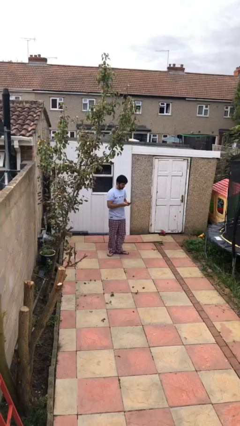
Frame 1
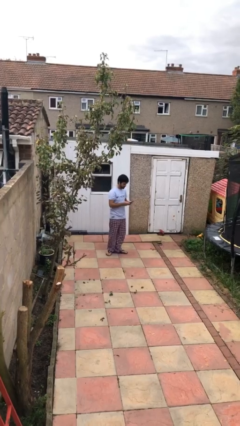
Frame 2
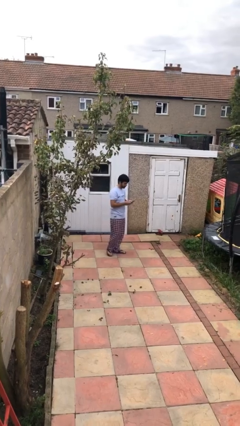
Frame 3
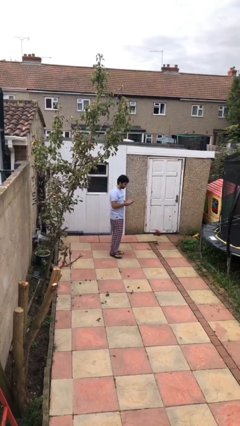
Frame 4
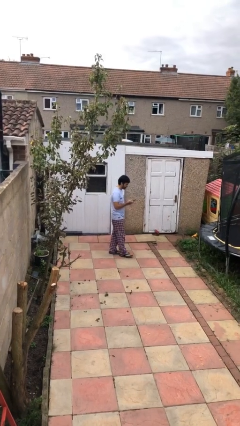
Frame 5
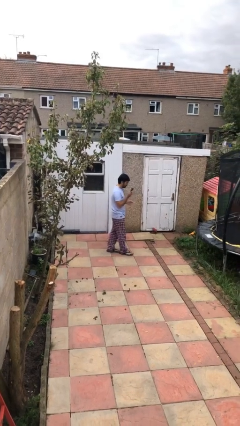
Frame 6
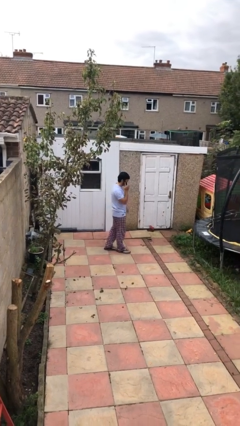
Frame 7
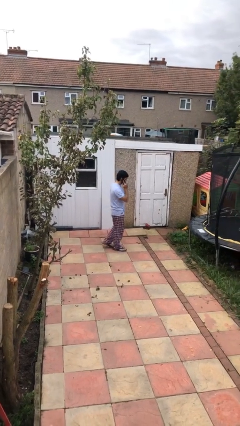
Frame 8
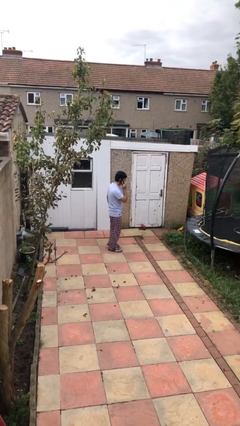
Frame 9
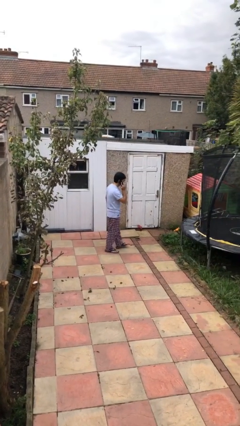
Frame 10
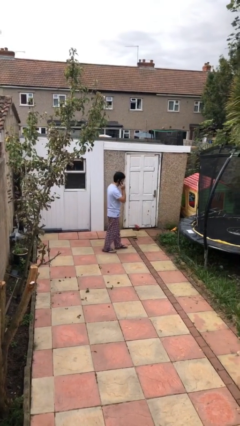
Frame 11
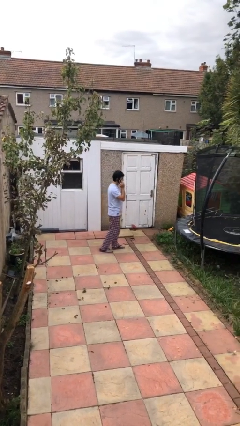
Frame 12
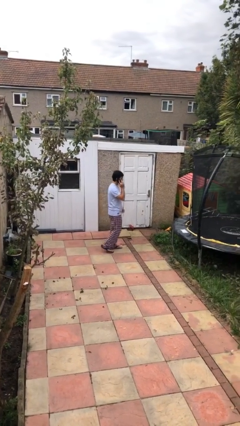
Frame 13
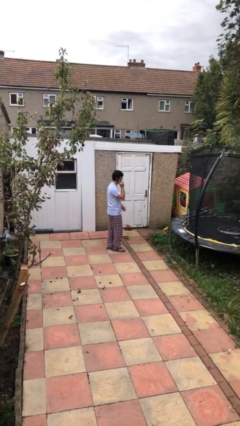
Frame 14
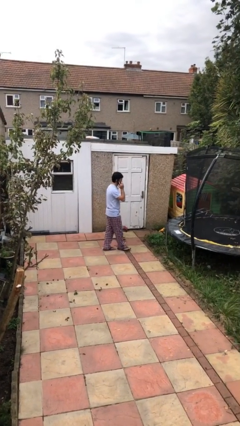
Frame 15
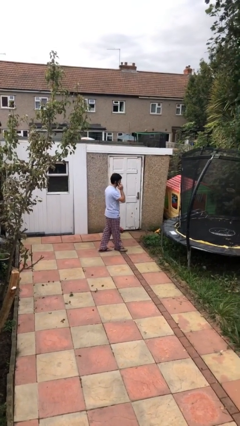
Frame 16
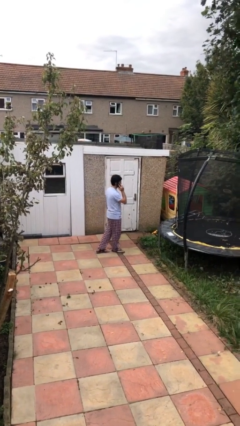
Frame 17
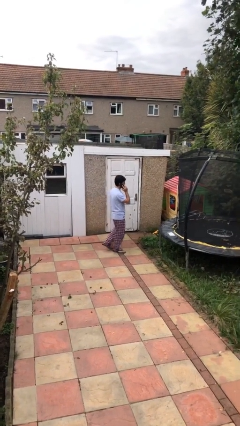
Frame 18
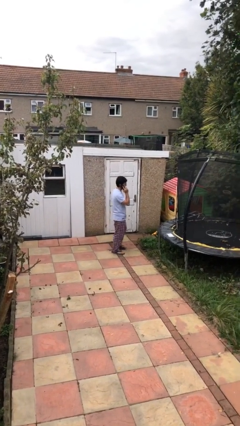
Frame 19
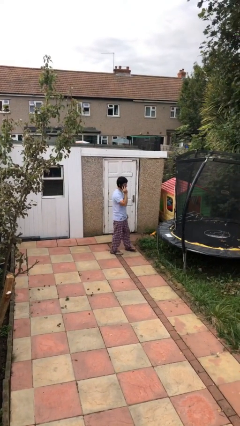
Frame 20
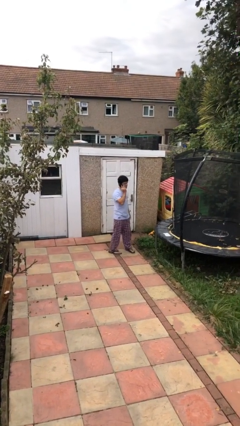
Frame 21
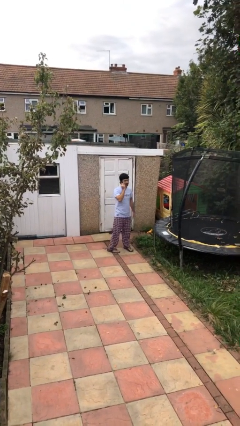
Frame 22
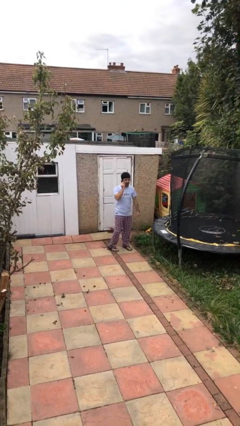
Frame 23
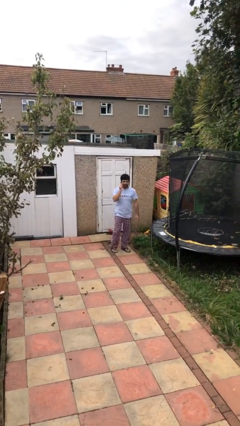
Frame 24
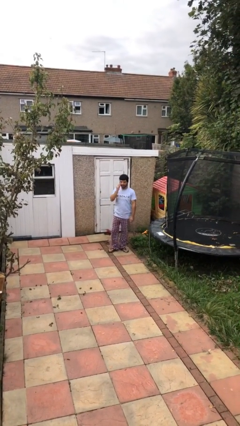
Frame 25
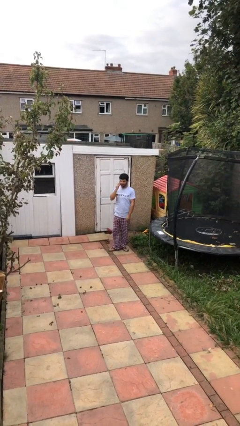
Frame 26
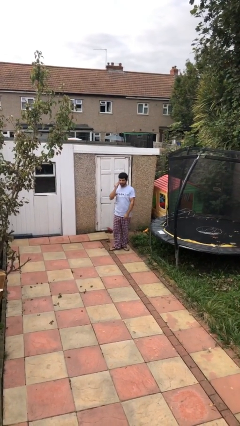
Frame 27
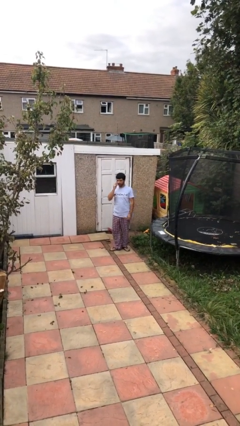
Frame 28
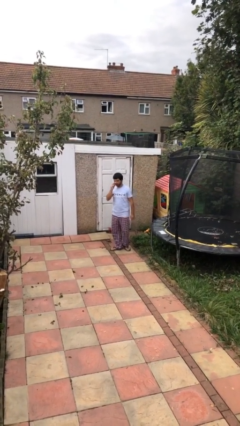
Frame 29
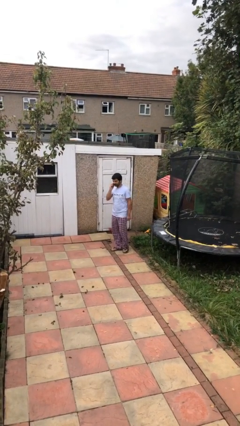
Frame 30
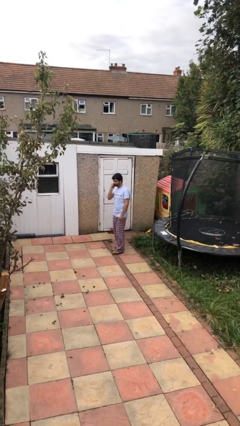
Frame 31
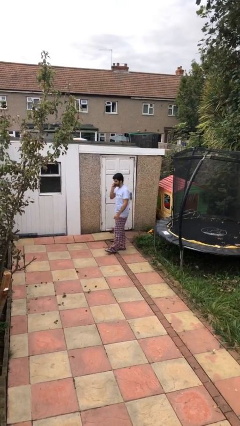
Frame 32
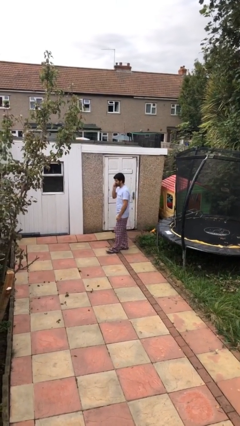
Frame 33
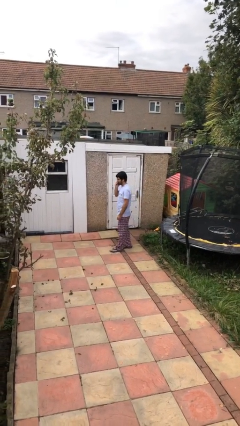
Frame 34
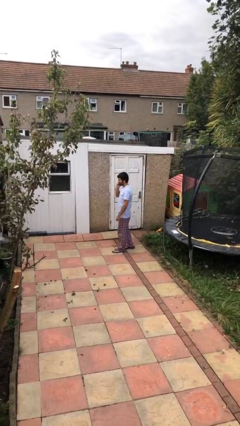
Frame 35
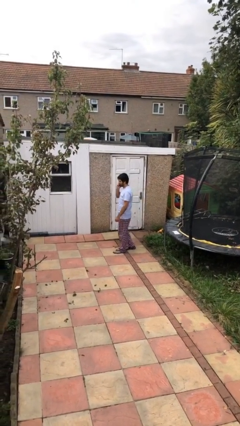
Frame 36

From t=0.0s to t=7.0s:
person talks on phone

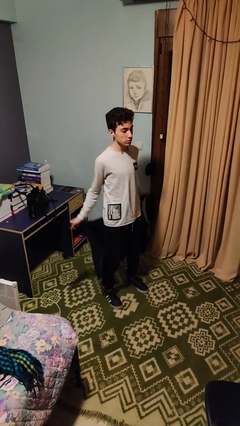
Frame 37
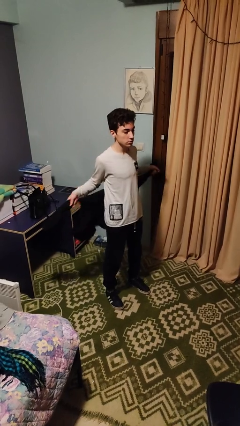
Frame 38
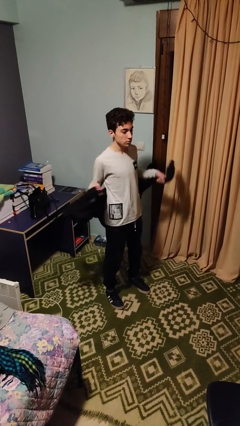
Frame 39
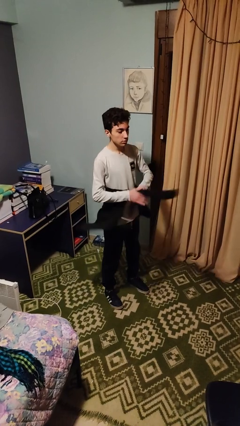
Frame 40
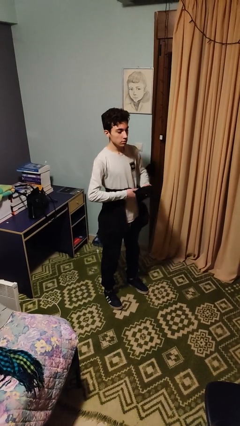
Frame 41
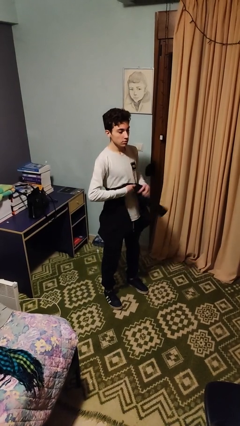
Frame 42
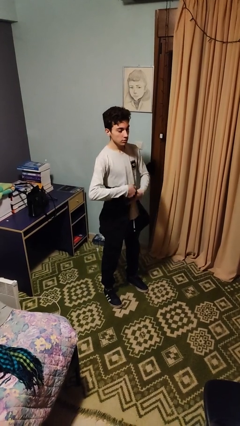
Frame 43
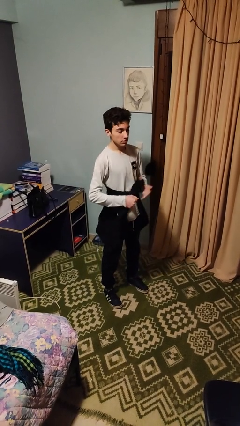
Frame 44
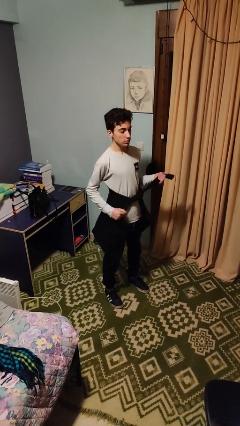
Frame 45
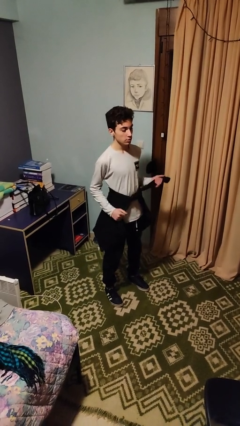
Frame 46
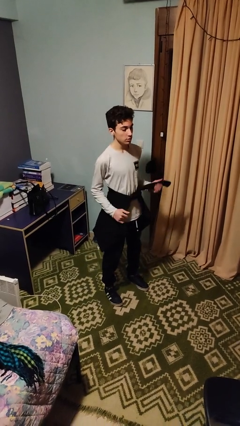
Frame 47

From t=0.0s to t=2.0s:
person ties jacket around waist

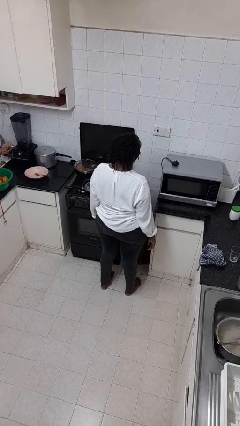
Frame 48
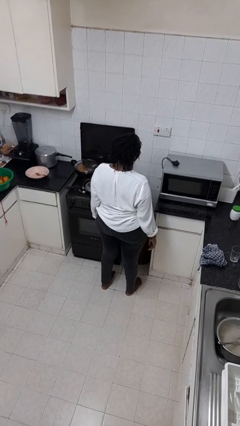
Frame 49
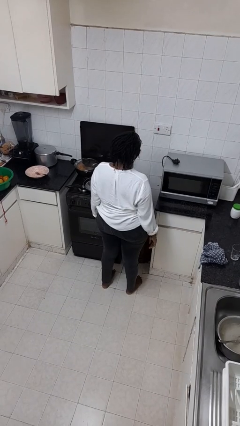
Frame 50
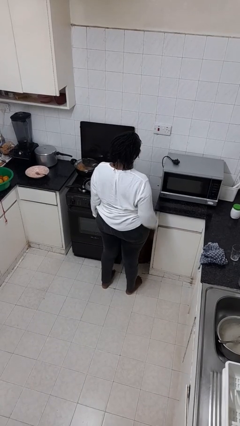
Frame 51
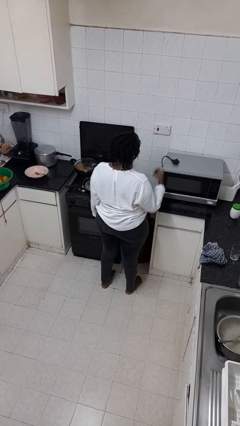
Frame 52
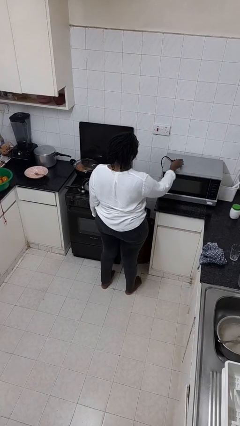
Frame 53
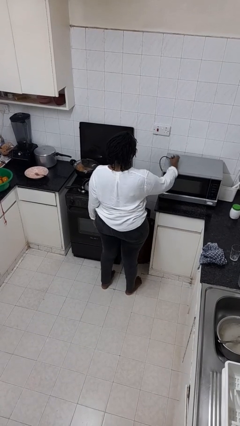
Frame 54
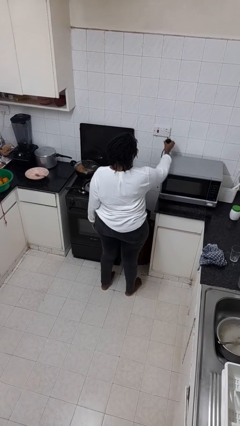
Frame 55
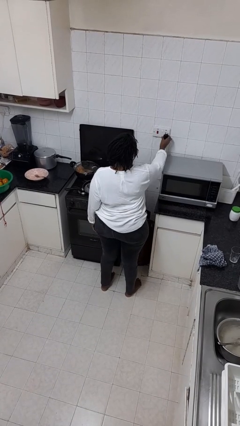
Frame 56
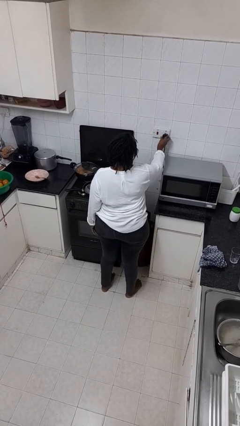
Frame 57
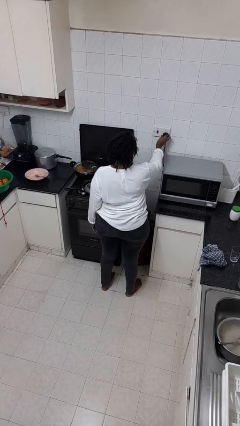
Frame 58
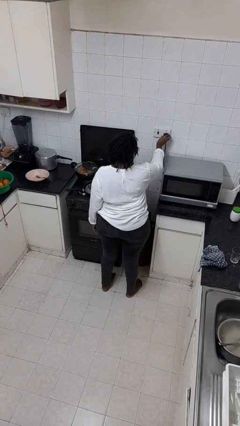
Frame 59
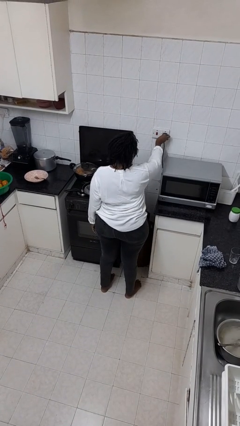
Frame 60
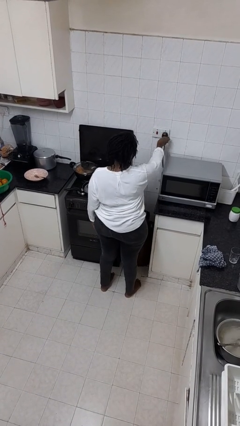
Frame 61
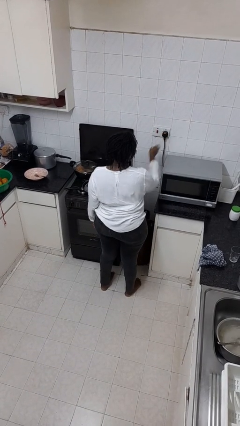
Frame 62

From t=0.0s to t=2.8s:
person plugs into electrical socket

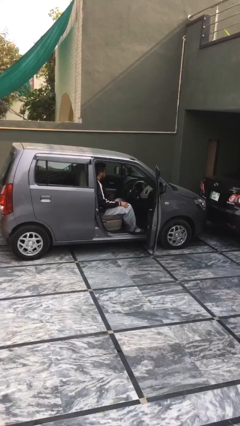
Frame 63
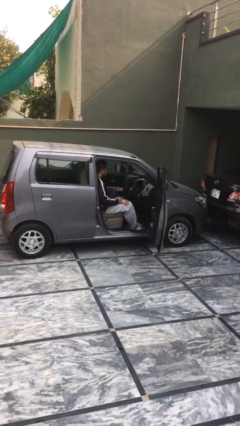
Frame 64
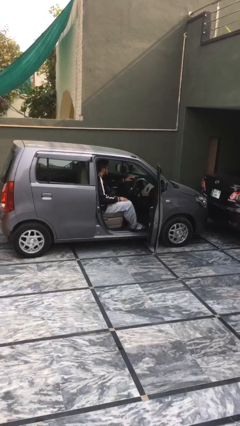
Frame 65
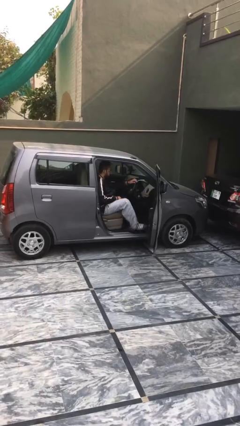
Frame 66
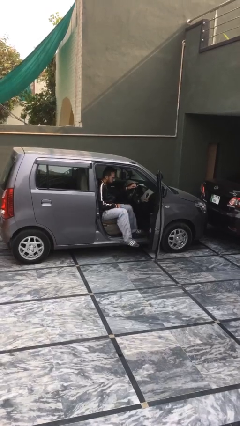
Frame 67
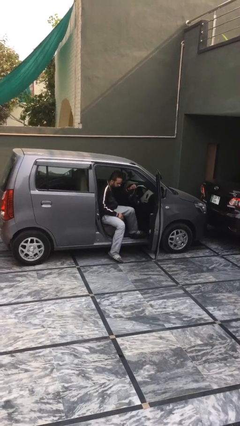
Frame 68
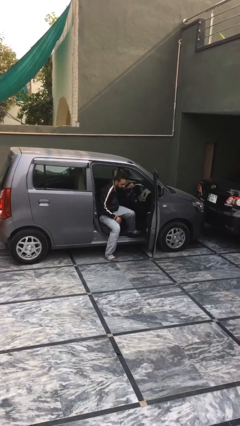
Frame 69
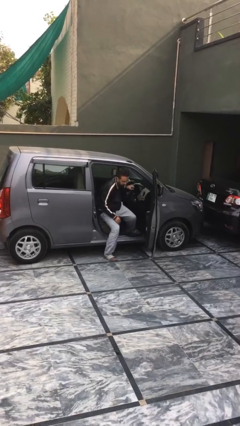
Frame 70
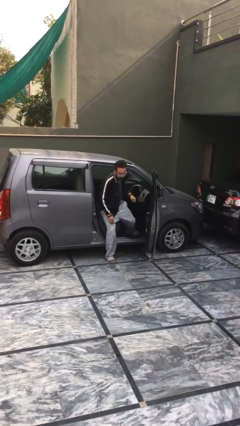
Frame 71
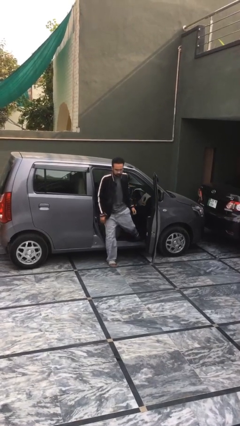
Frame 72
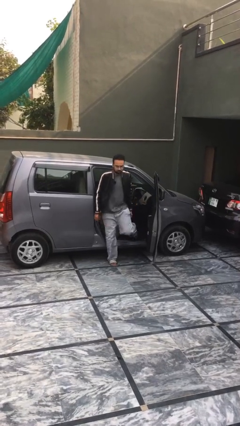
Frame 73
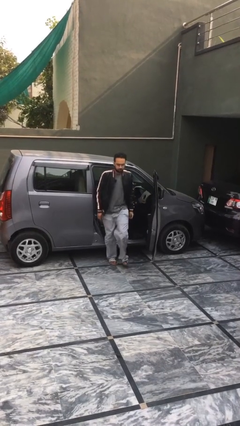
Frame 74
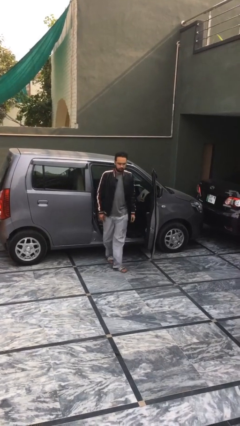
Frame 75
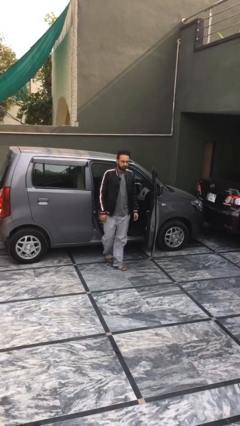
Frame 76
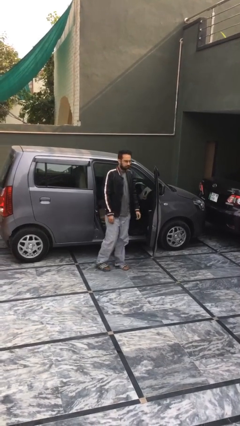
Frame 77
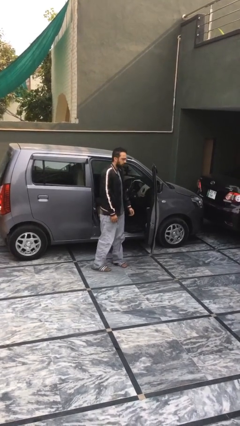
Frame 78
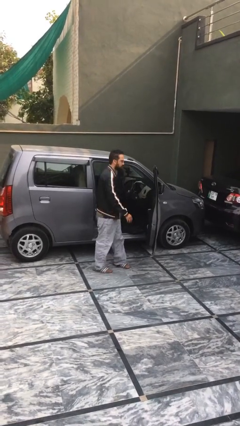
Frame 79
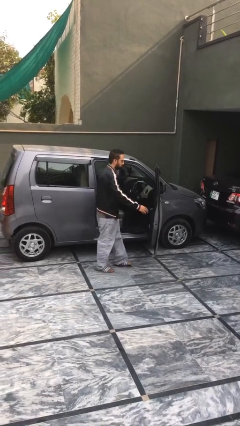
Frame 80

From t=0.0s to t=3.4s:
person exits car

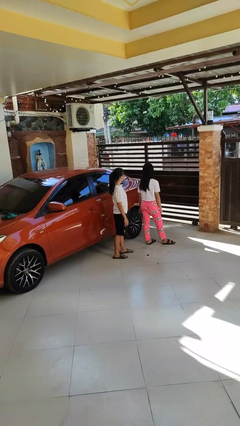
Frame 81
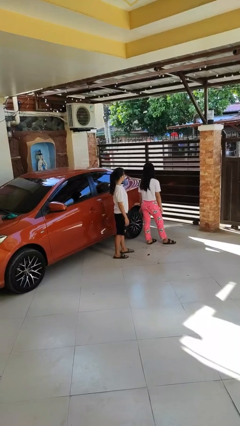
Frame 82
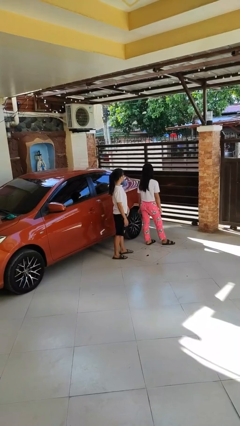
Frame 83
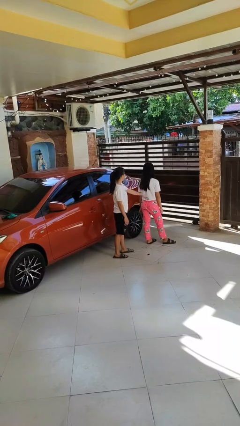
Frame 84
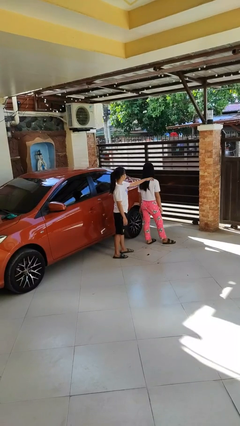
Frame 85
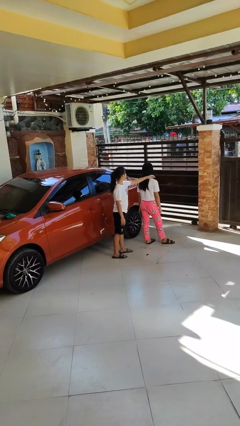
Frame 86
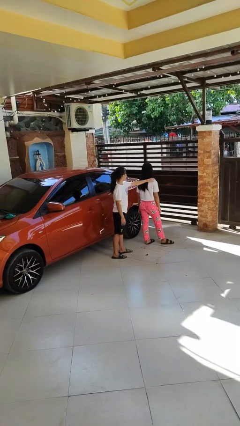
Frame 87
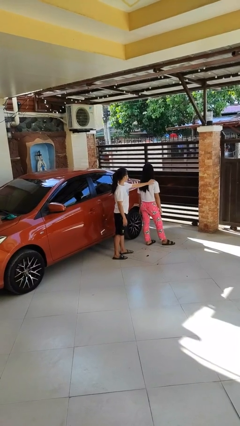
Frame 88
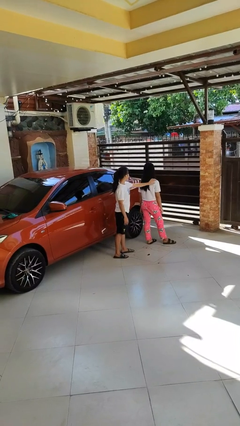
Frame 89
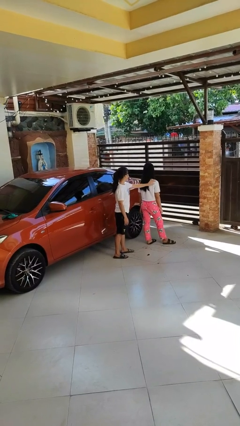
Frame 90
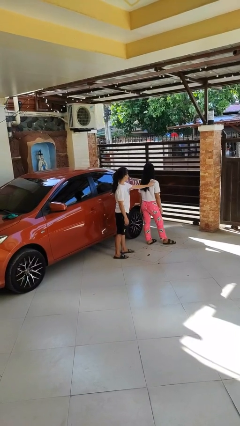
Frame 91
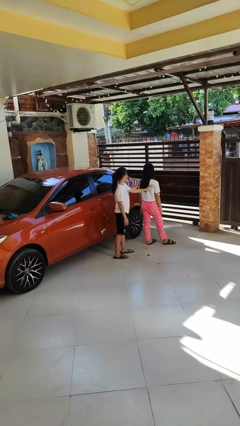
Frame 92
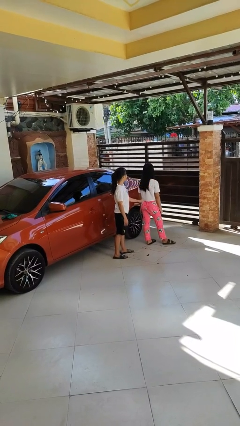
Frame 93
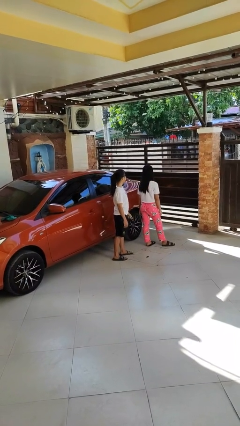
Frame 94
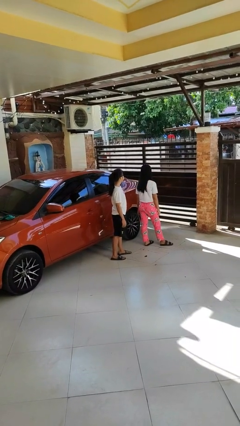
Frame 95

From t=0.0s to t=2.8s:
person touches back of person
